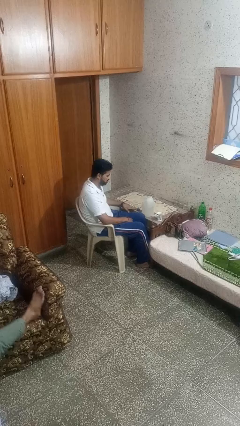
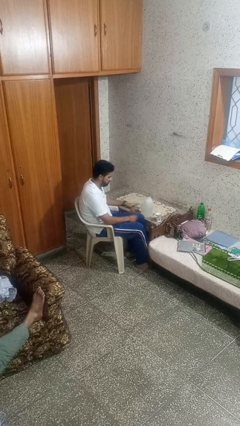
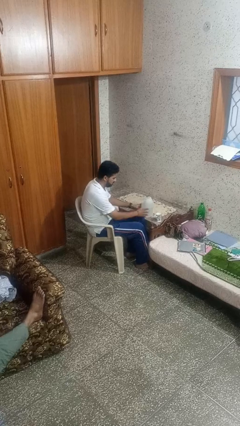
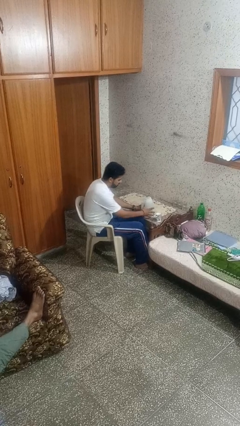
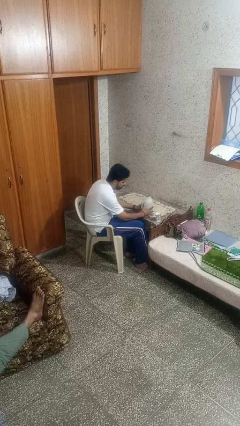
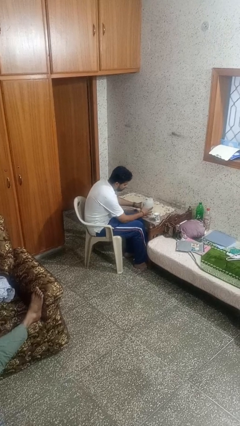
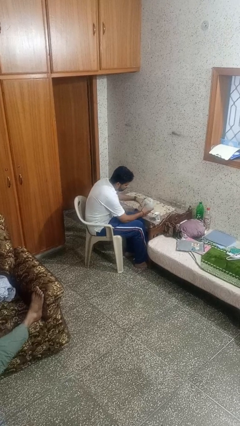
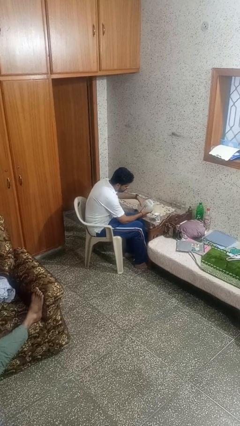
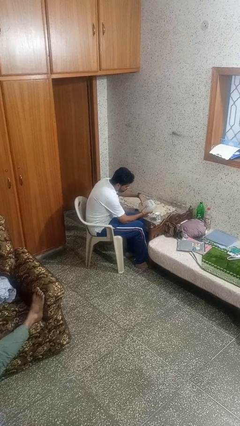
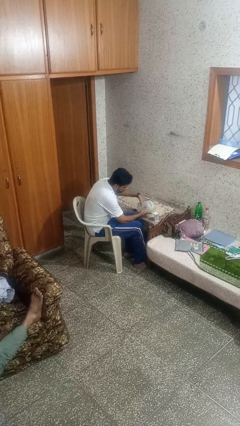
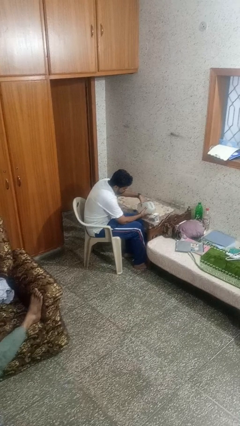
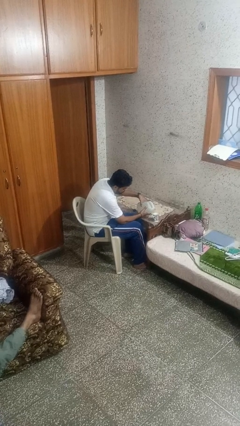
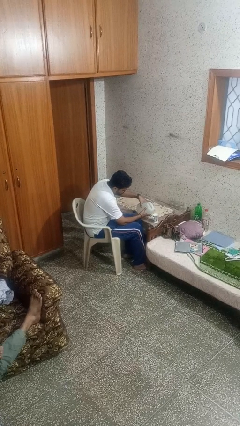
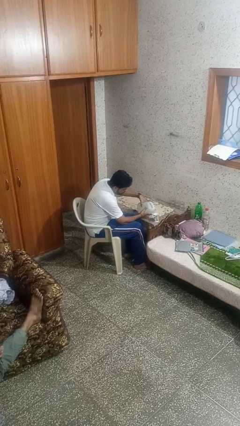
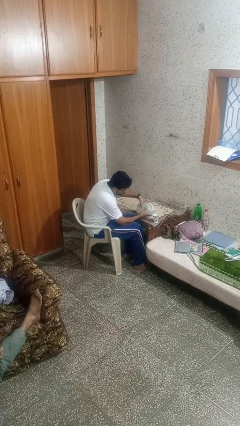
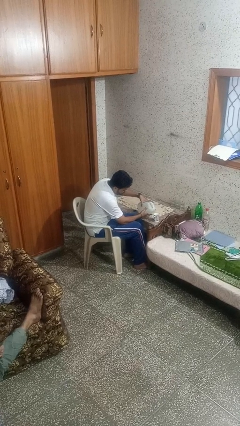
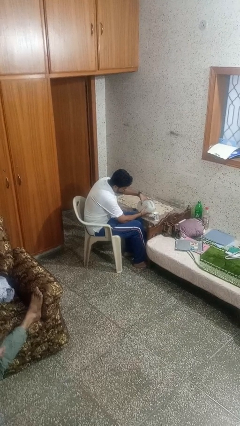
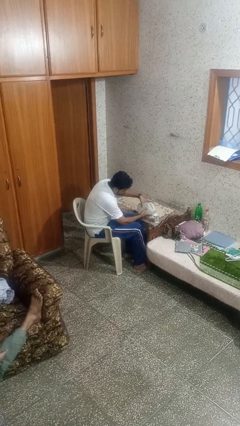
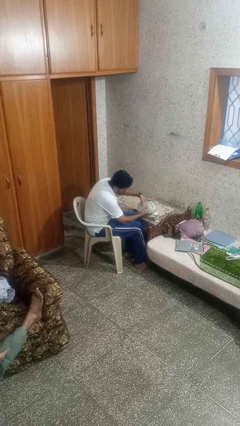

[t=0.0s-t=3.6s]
person pours liquid into cup

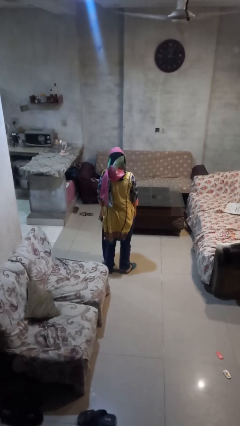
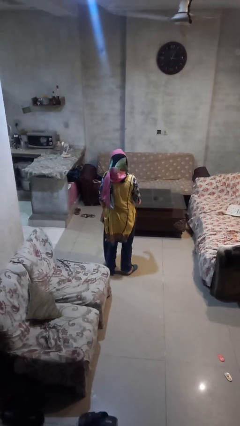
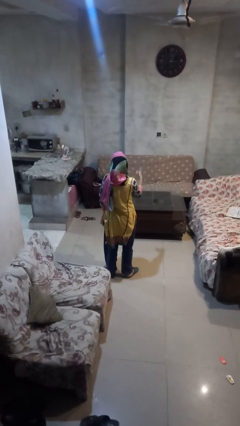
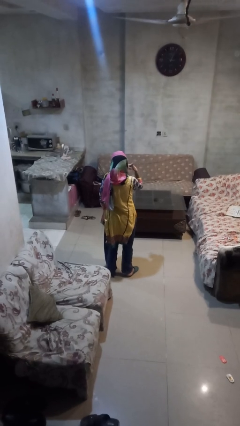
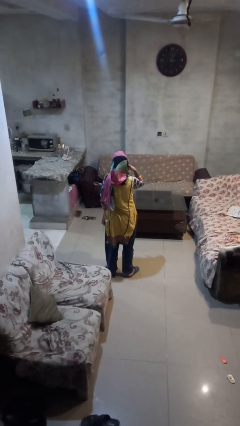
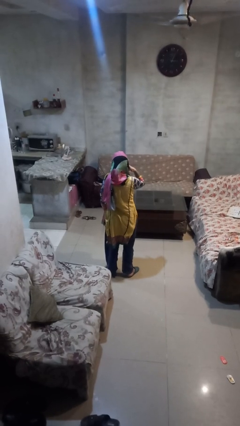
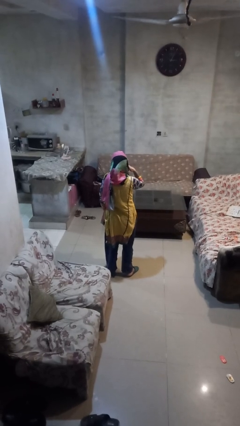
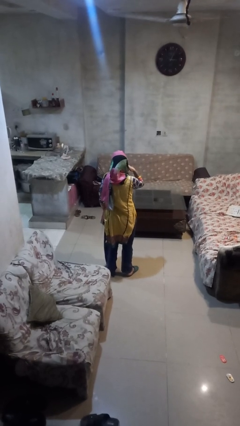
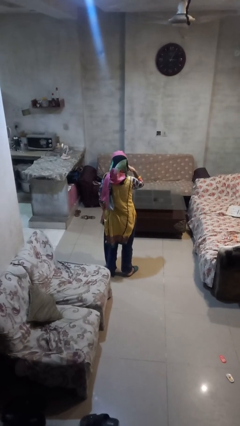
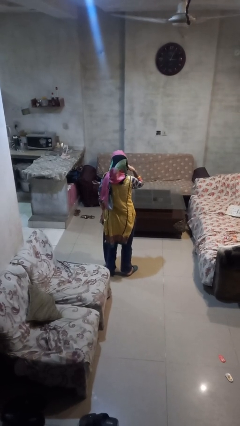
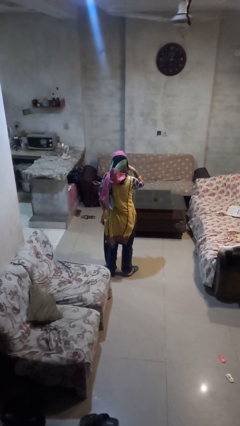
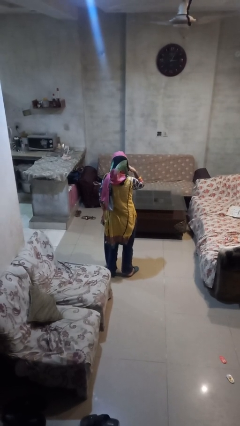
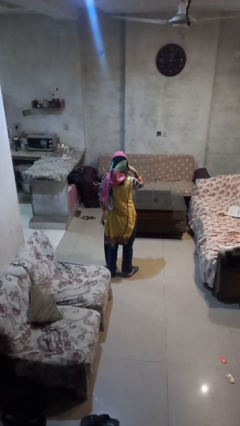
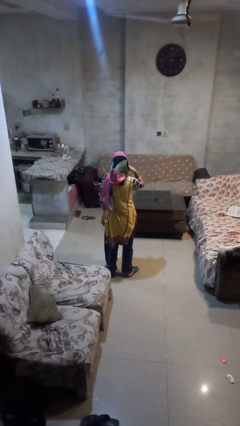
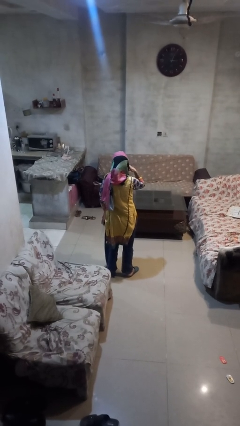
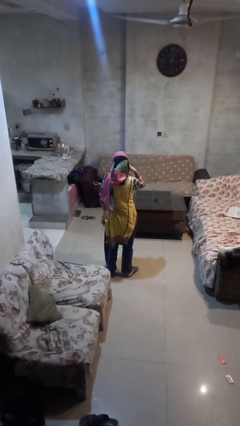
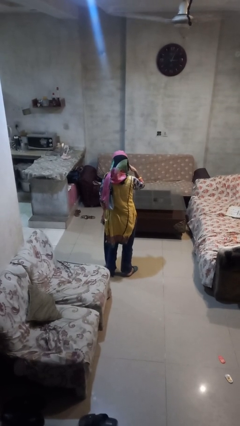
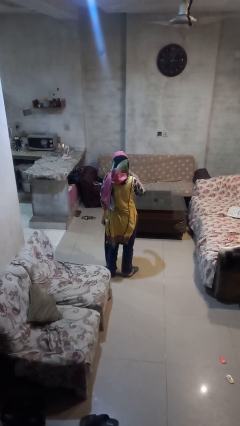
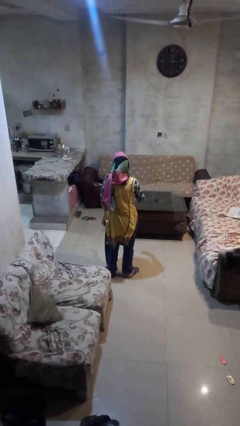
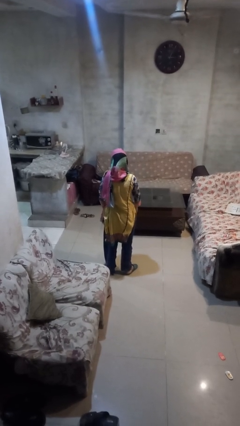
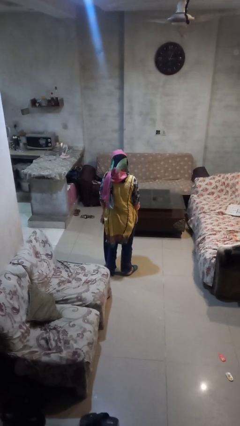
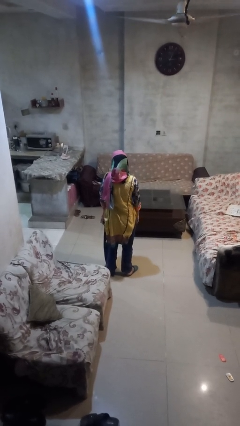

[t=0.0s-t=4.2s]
person gestures call me

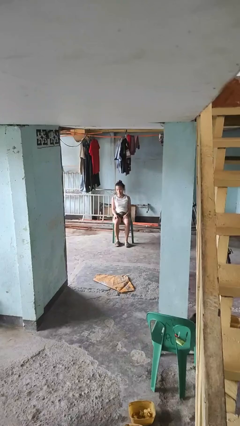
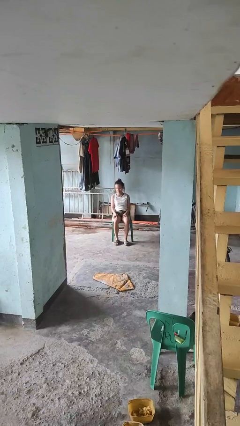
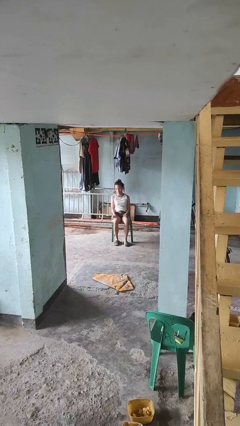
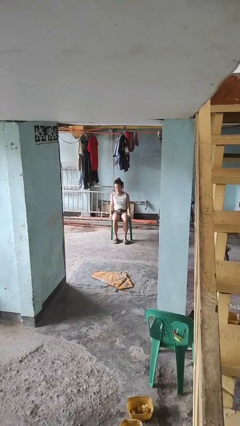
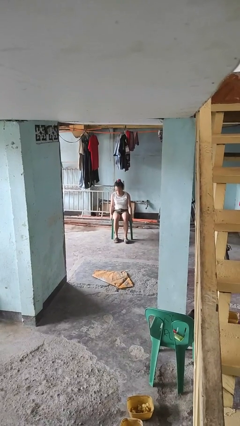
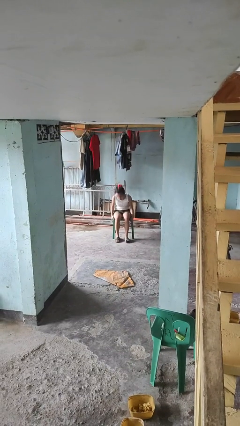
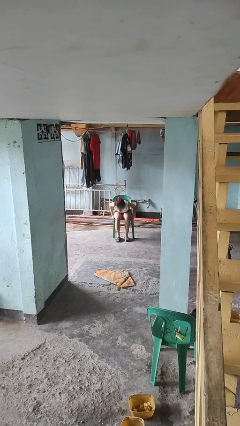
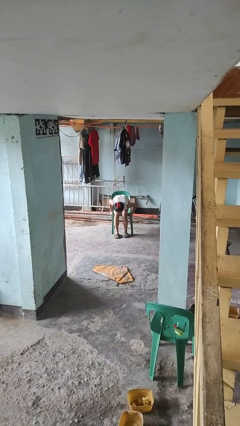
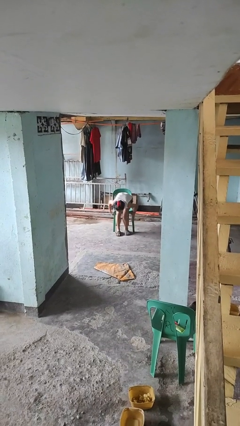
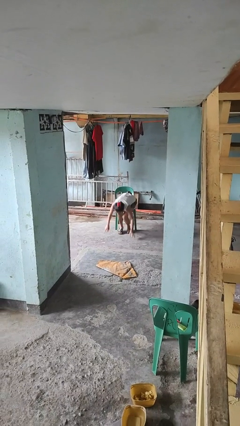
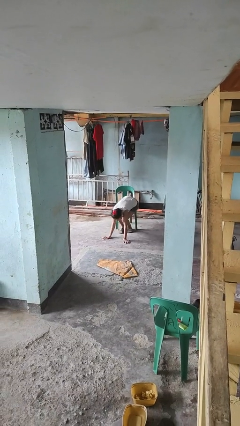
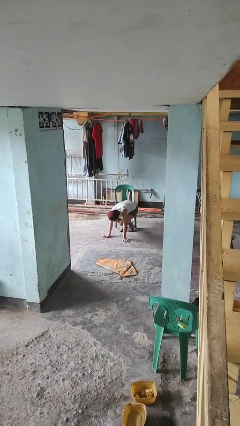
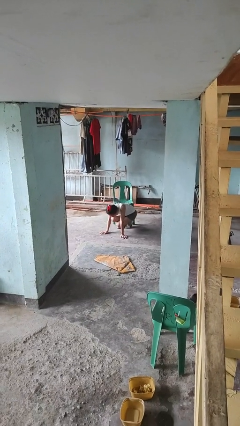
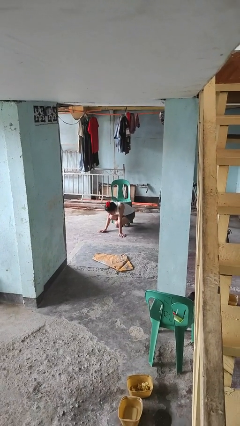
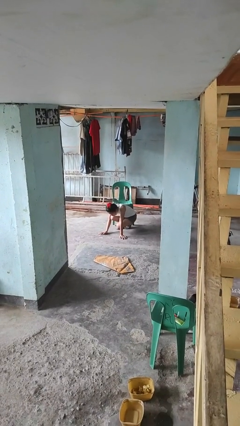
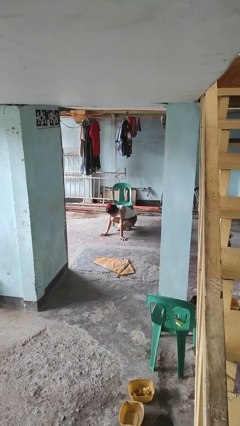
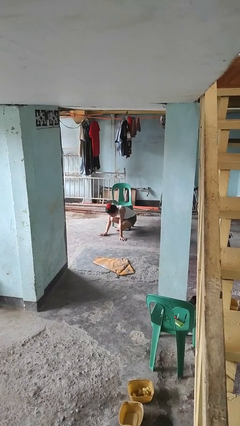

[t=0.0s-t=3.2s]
person falls from chair

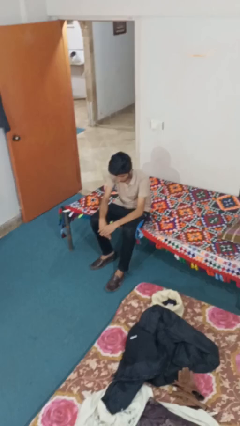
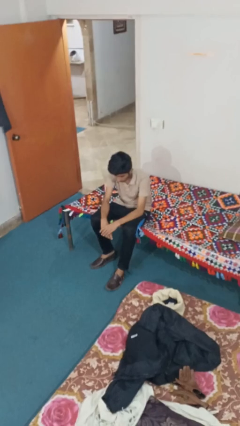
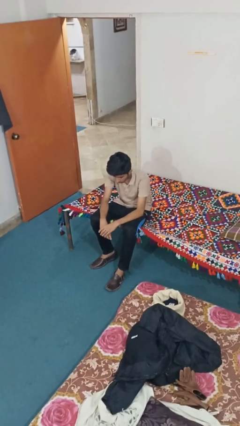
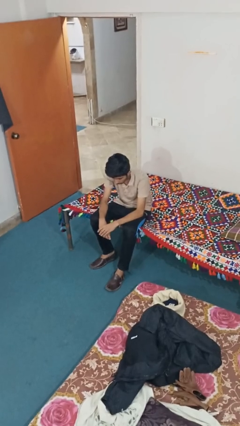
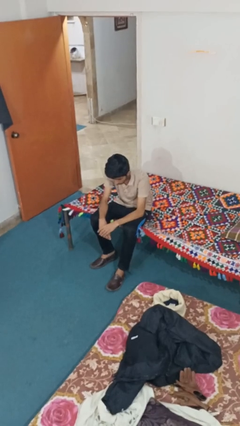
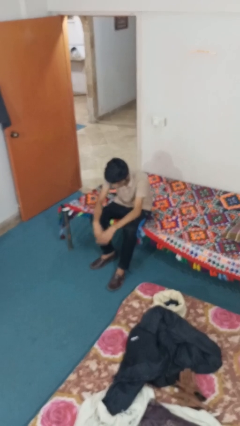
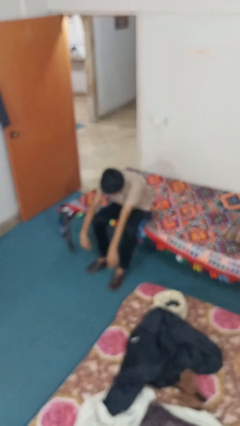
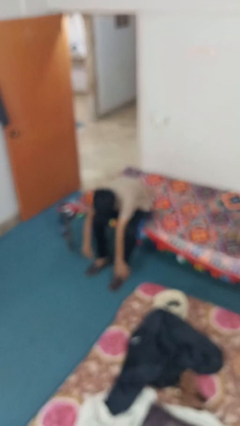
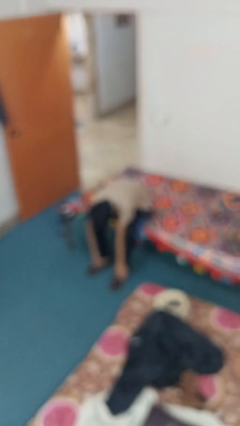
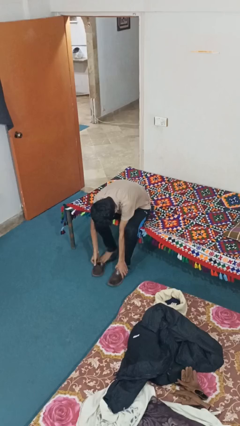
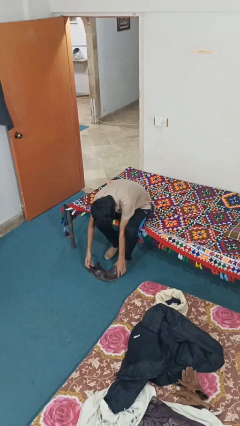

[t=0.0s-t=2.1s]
person takes off shoes

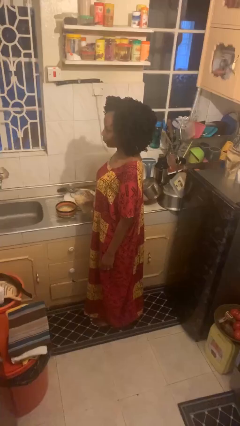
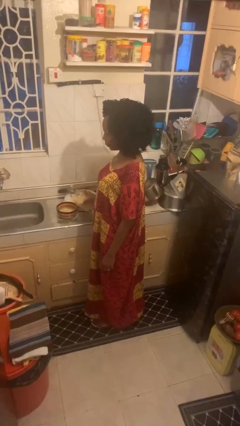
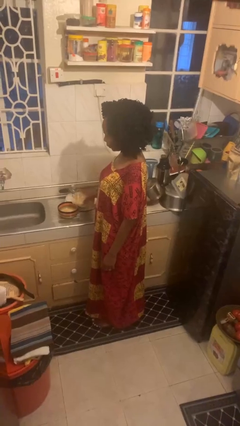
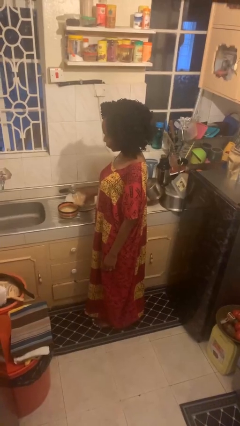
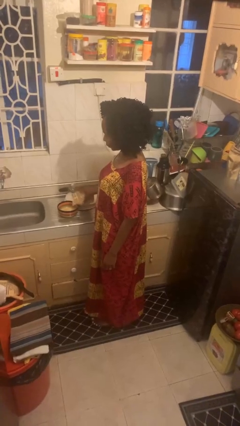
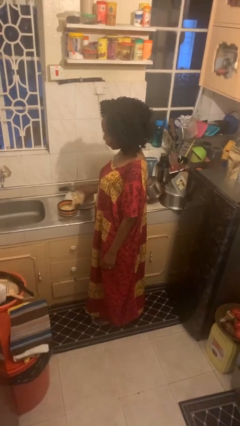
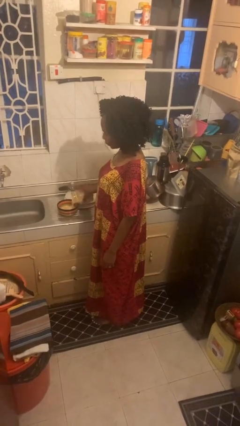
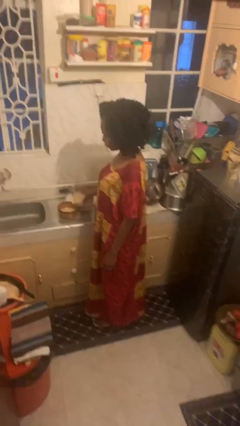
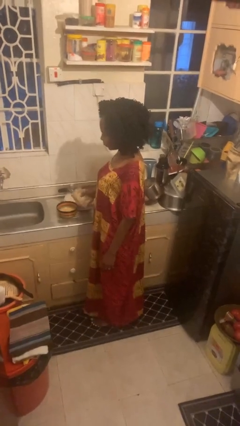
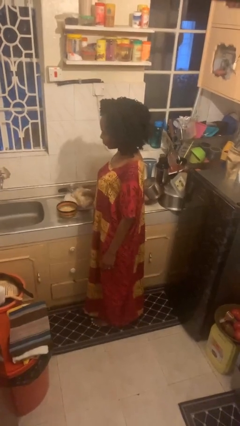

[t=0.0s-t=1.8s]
person pours into bowl

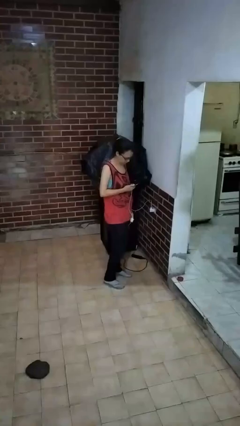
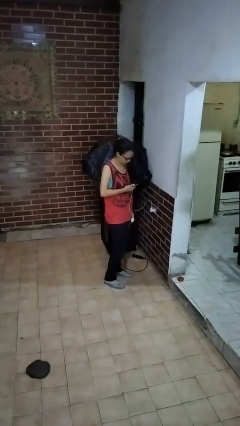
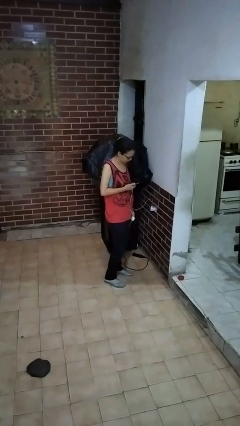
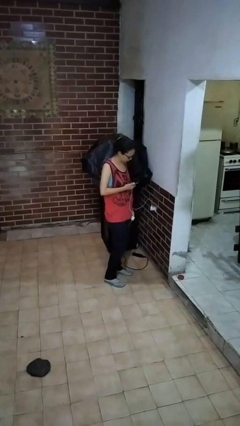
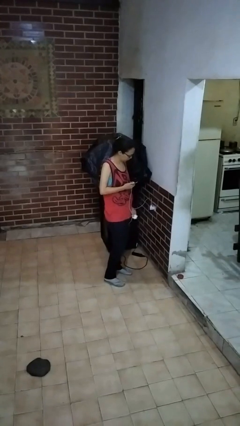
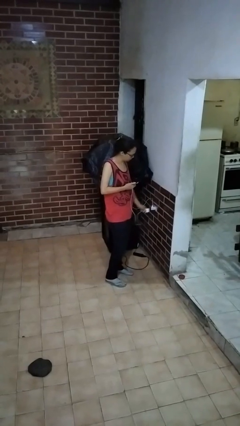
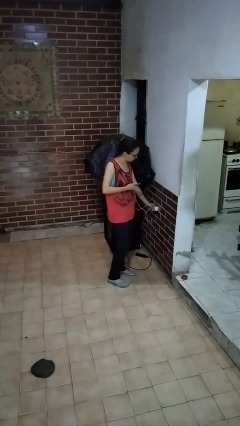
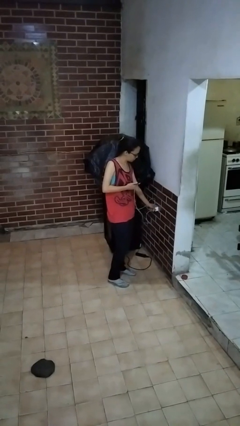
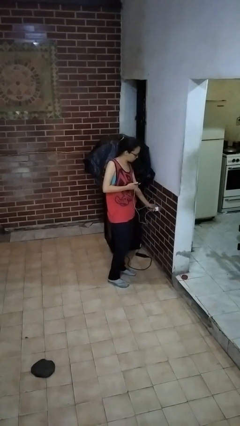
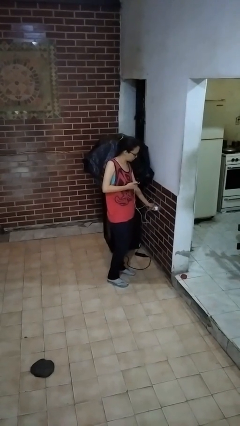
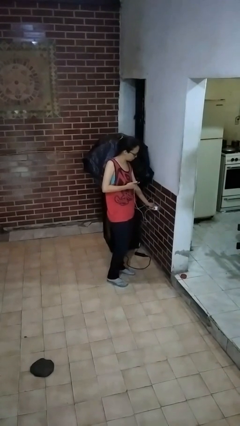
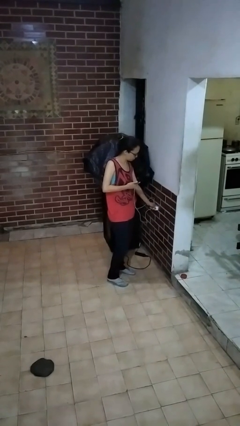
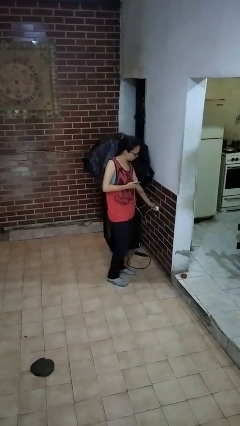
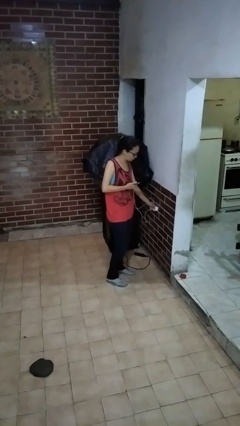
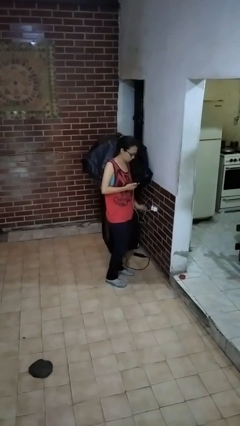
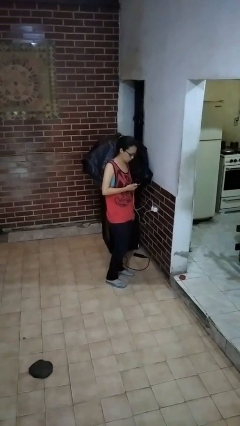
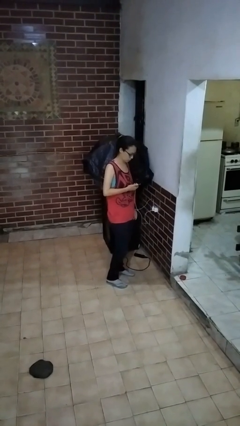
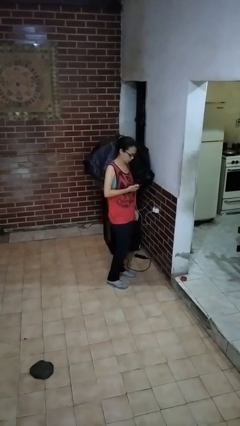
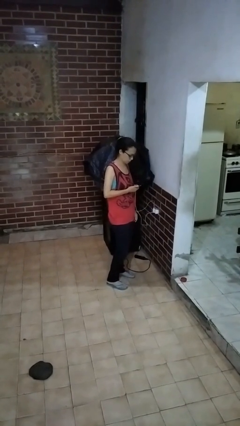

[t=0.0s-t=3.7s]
person plugs into electrical socket
